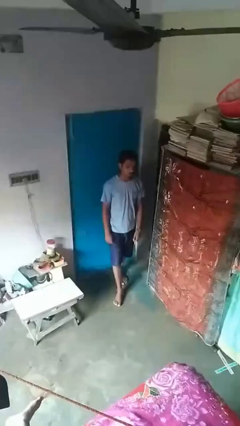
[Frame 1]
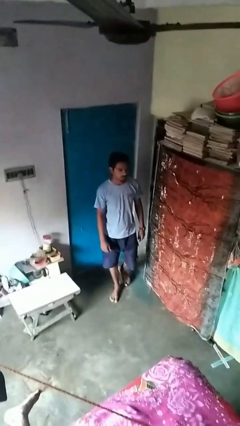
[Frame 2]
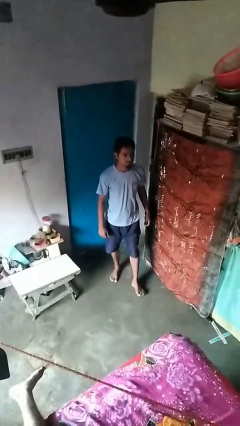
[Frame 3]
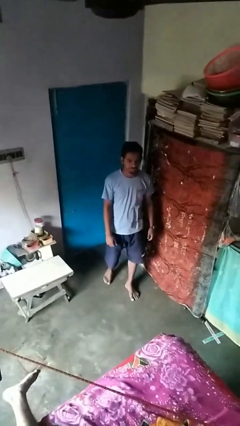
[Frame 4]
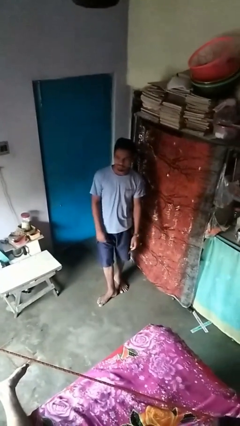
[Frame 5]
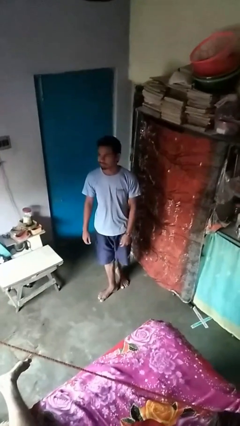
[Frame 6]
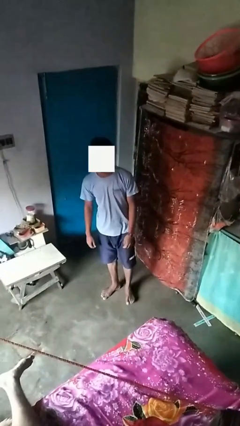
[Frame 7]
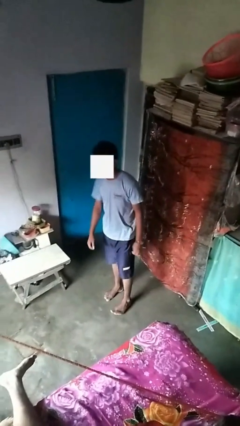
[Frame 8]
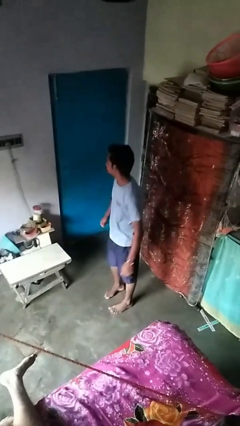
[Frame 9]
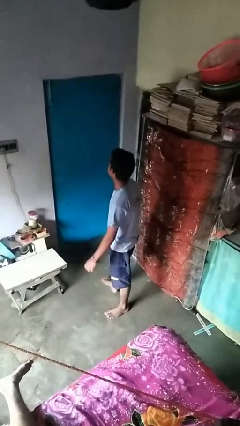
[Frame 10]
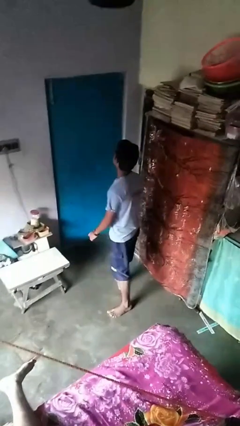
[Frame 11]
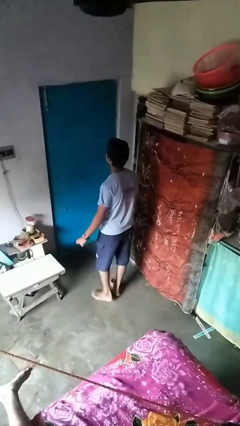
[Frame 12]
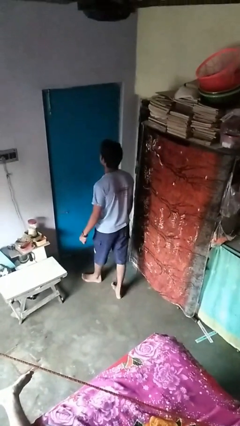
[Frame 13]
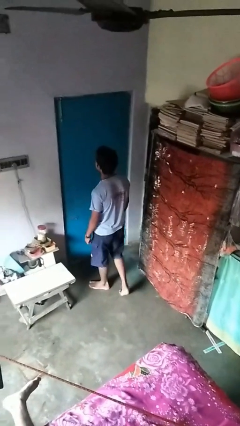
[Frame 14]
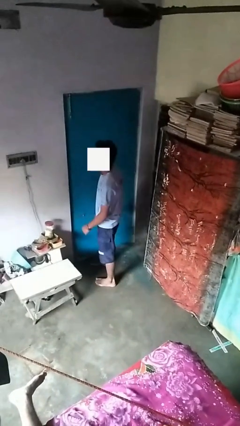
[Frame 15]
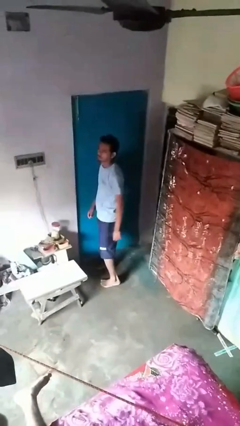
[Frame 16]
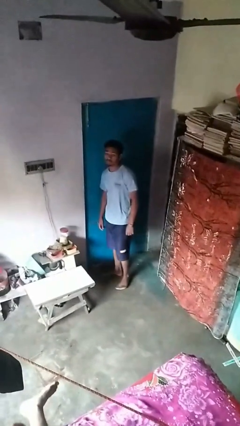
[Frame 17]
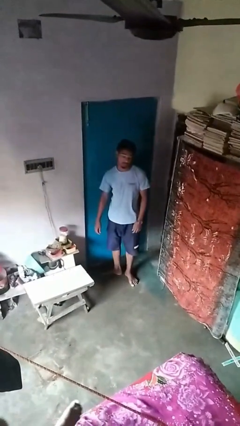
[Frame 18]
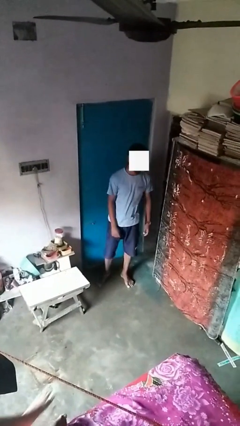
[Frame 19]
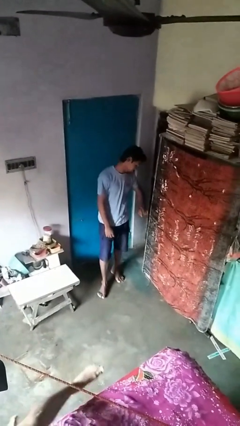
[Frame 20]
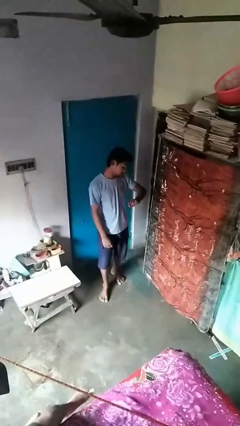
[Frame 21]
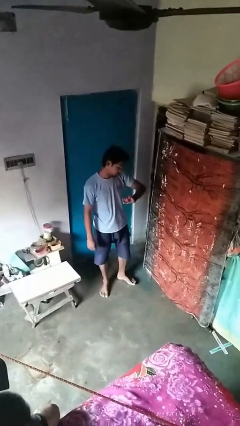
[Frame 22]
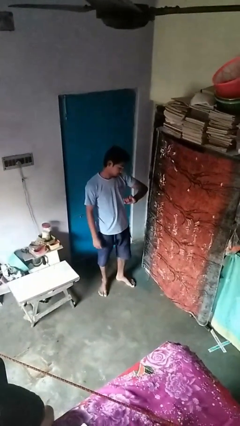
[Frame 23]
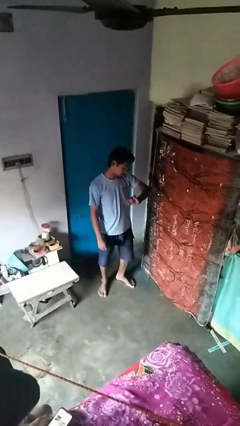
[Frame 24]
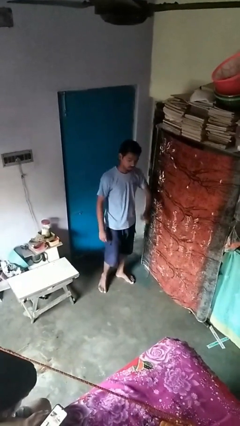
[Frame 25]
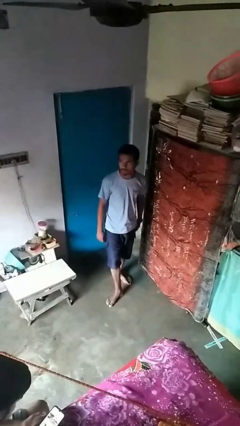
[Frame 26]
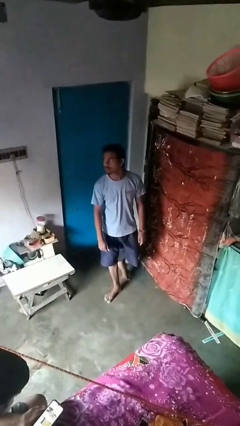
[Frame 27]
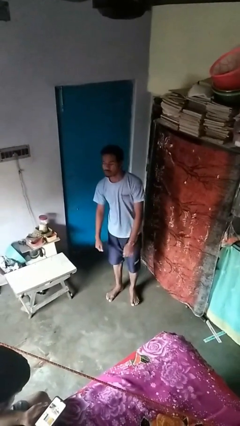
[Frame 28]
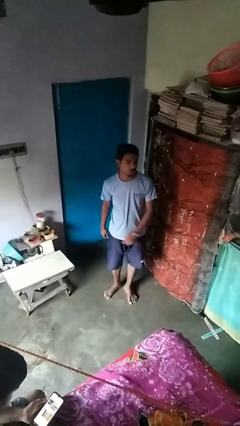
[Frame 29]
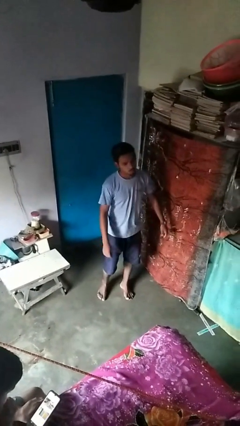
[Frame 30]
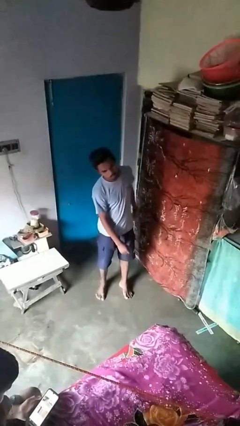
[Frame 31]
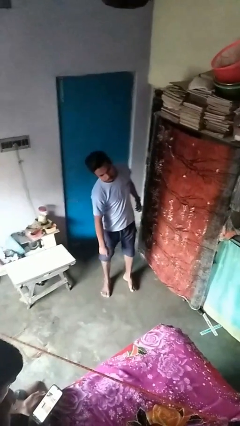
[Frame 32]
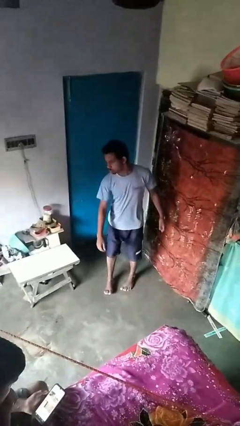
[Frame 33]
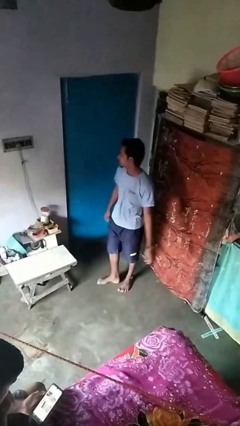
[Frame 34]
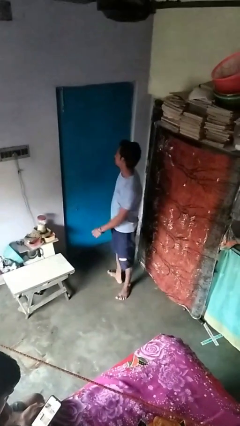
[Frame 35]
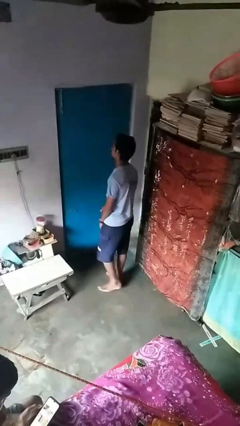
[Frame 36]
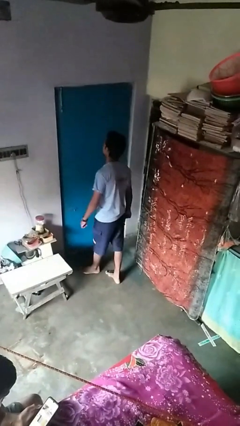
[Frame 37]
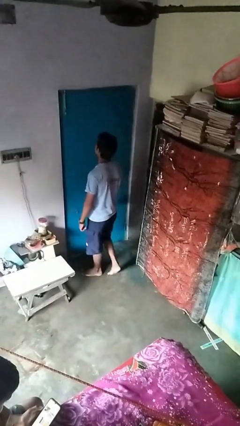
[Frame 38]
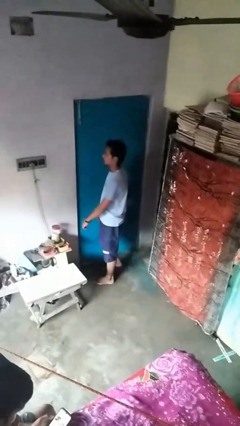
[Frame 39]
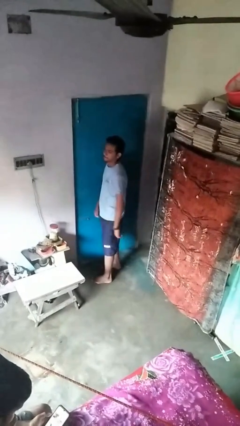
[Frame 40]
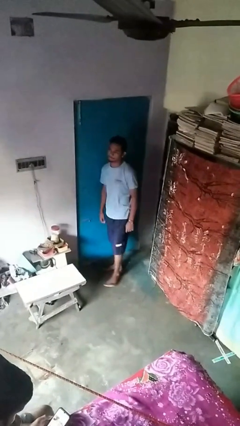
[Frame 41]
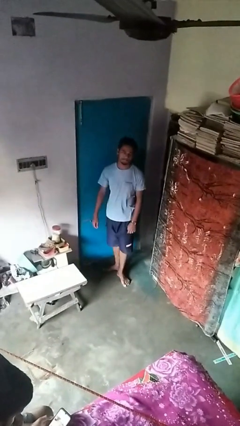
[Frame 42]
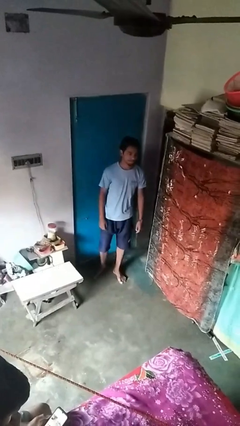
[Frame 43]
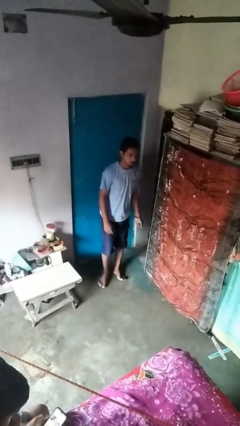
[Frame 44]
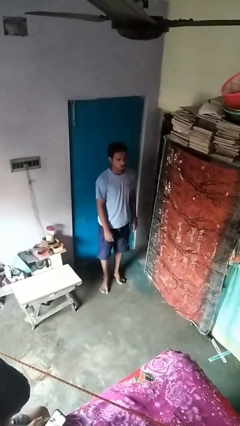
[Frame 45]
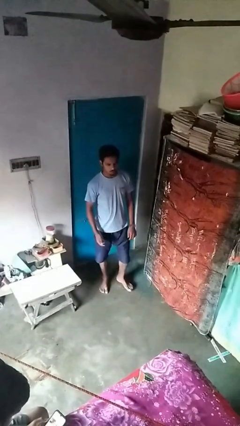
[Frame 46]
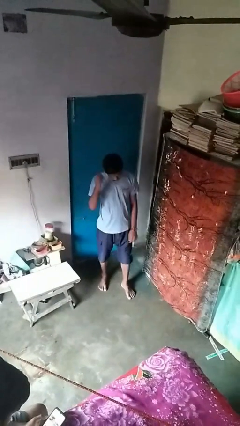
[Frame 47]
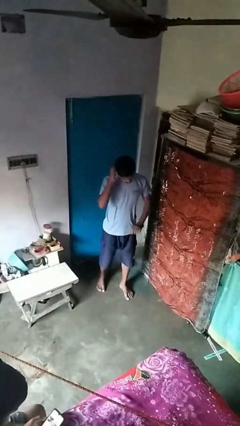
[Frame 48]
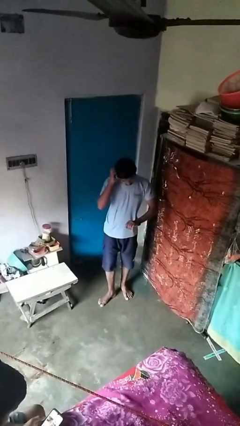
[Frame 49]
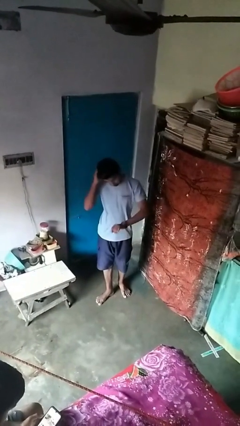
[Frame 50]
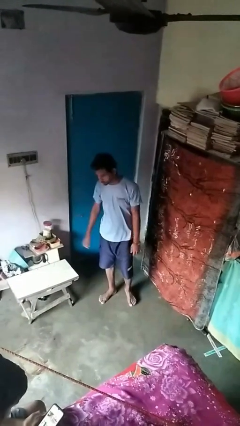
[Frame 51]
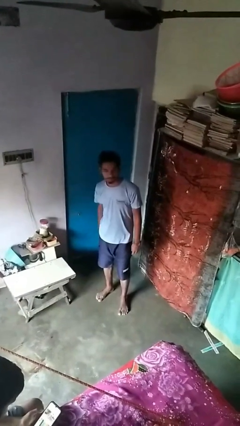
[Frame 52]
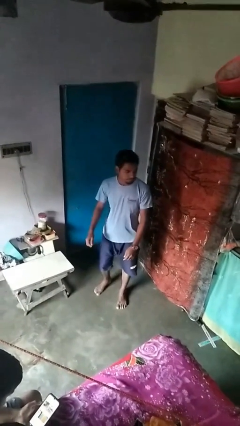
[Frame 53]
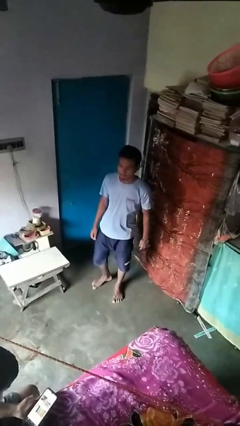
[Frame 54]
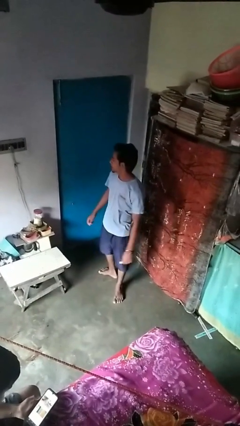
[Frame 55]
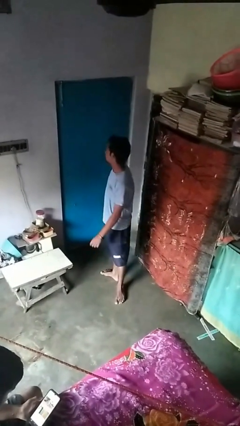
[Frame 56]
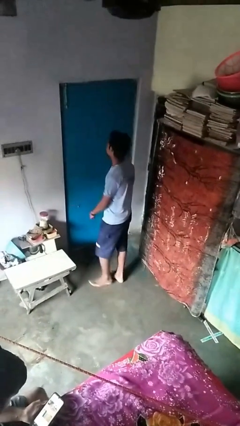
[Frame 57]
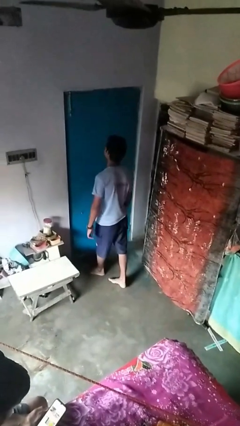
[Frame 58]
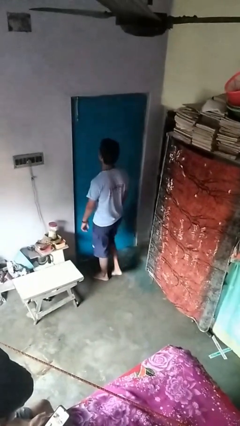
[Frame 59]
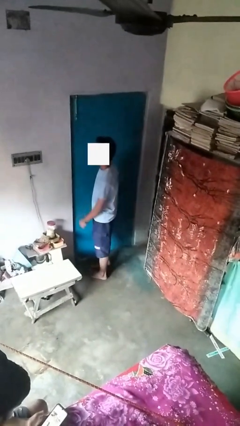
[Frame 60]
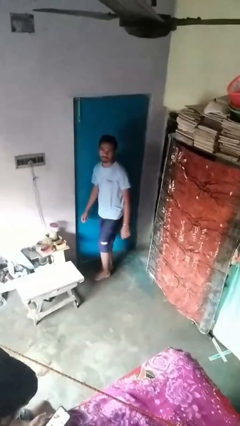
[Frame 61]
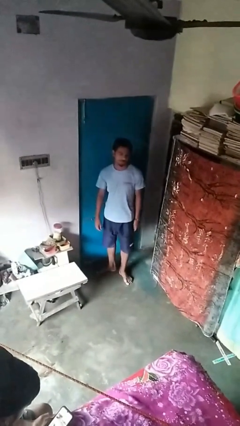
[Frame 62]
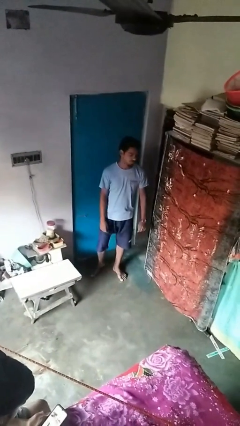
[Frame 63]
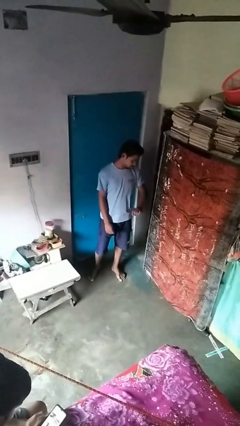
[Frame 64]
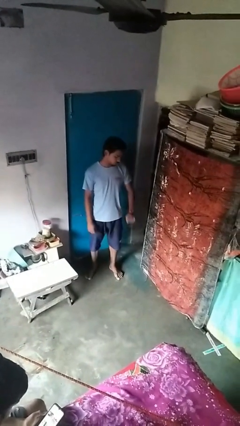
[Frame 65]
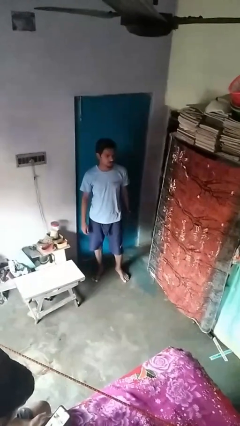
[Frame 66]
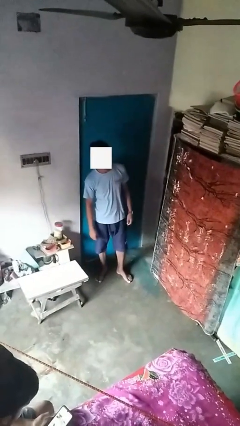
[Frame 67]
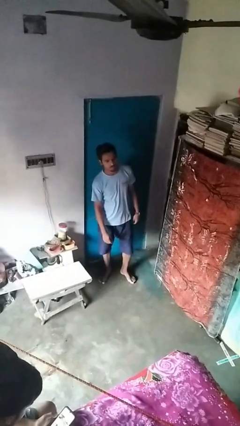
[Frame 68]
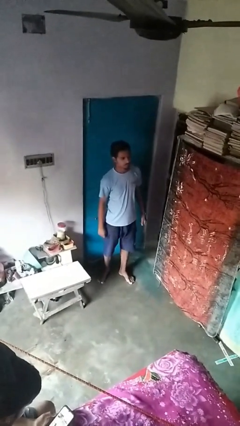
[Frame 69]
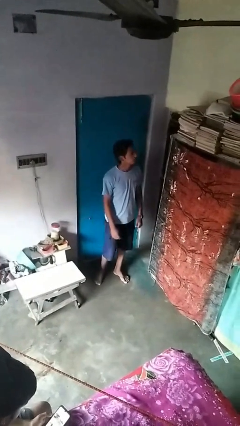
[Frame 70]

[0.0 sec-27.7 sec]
person walks

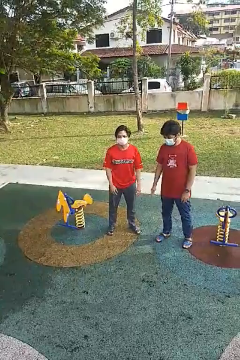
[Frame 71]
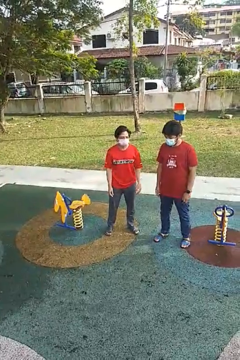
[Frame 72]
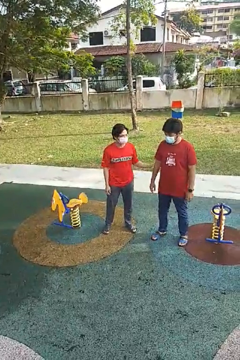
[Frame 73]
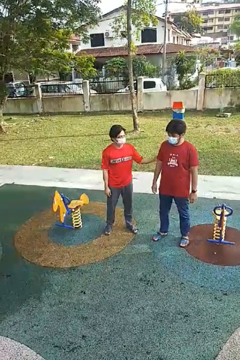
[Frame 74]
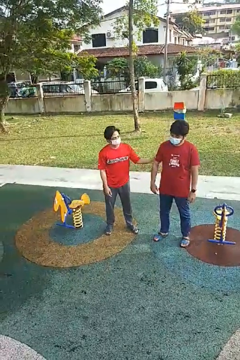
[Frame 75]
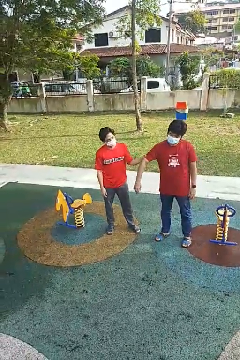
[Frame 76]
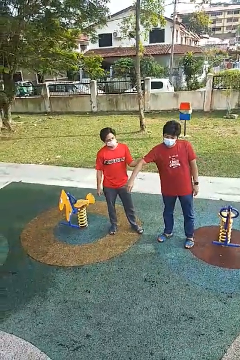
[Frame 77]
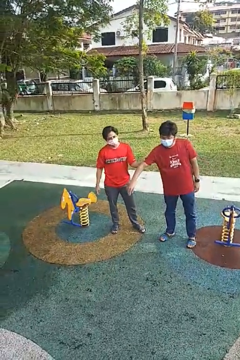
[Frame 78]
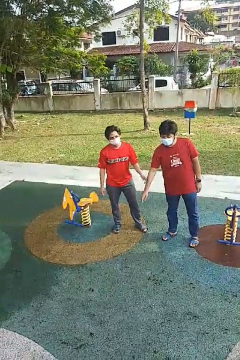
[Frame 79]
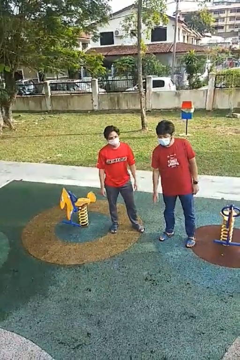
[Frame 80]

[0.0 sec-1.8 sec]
person grabs person by bicep

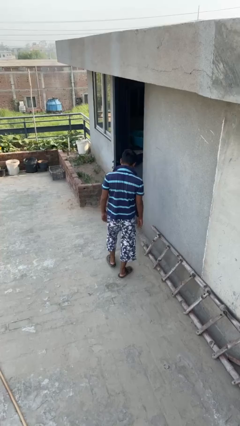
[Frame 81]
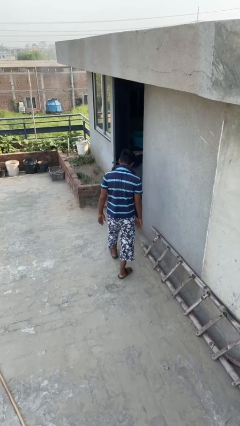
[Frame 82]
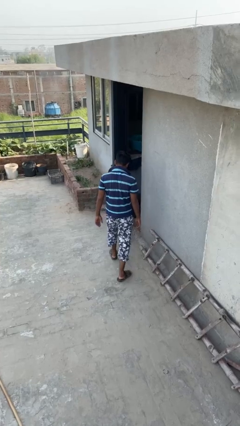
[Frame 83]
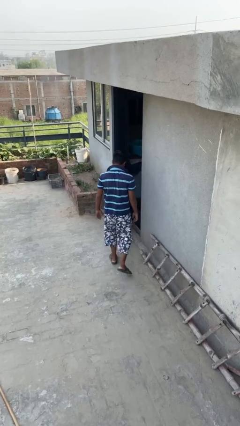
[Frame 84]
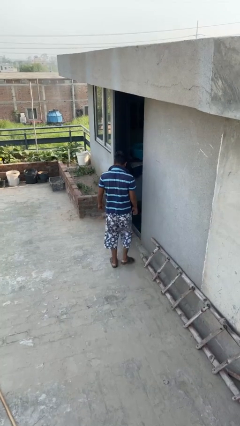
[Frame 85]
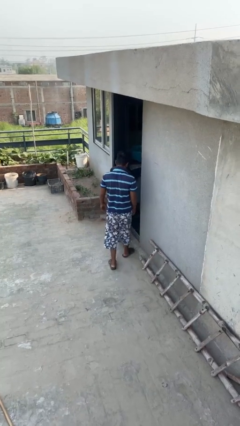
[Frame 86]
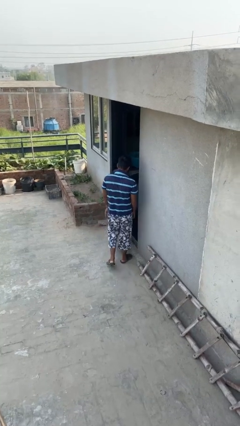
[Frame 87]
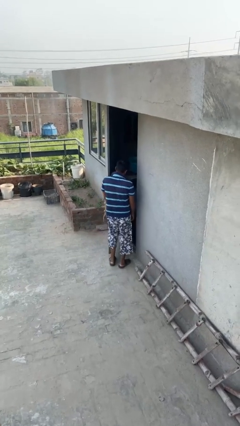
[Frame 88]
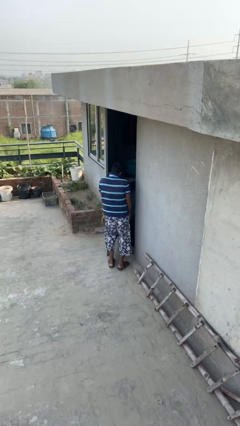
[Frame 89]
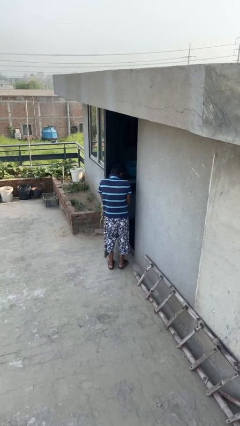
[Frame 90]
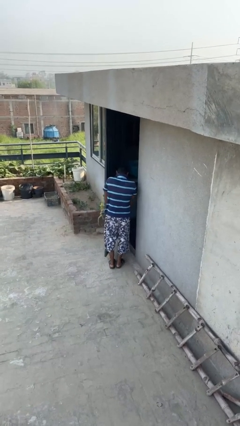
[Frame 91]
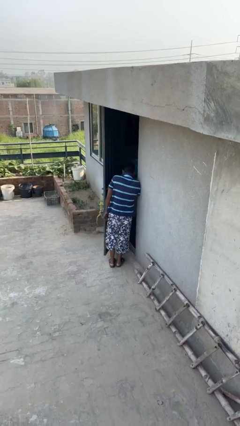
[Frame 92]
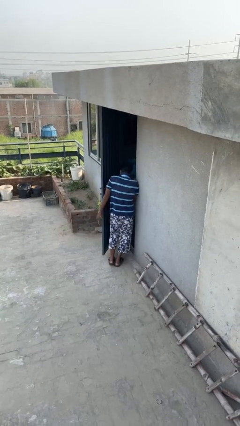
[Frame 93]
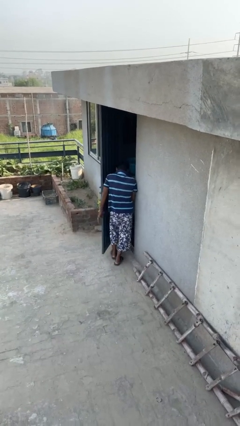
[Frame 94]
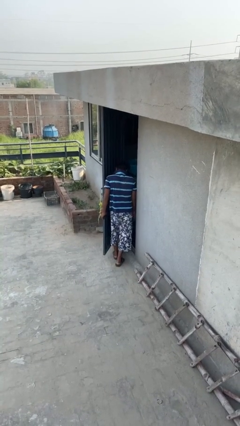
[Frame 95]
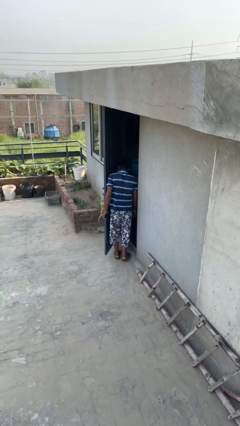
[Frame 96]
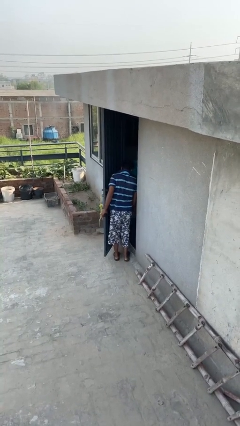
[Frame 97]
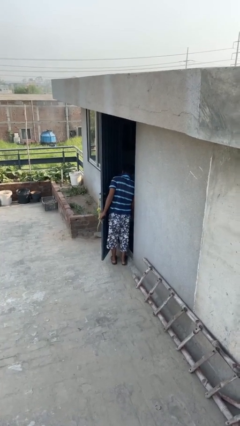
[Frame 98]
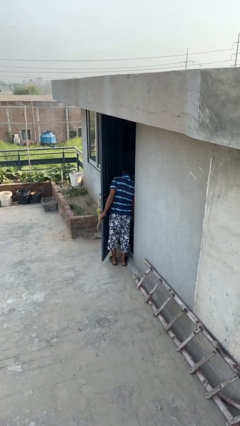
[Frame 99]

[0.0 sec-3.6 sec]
person bumps into wall
